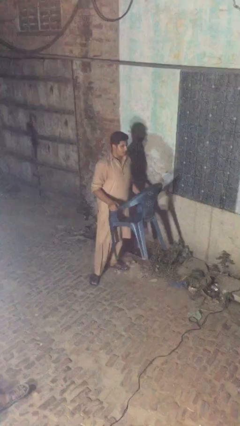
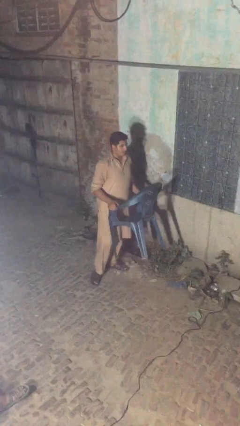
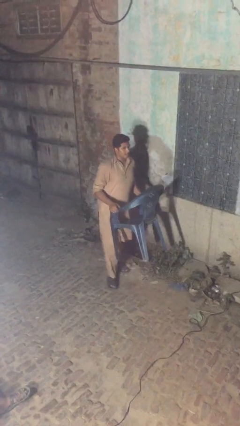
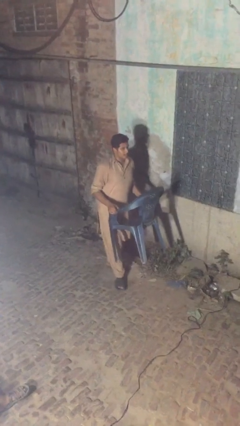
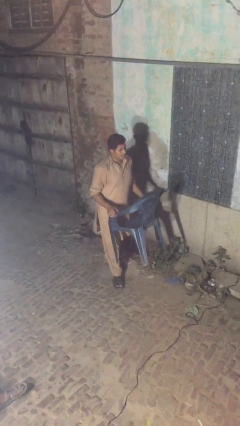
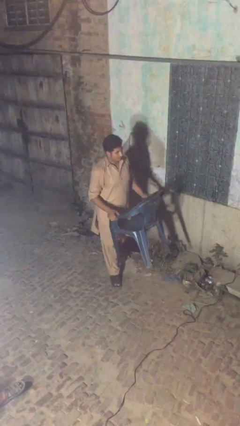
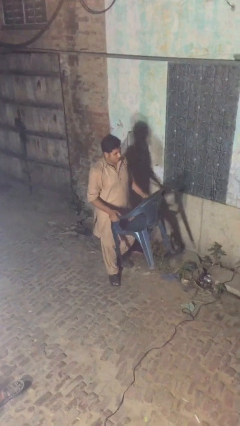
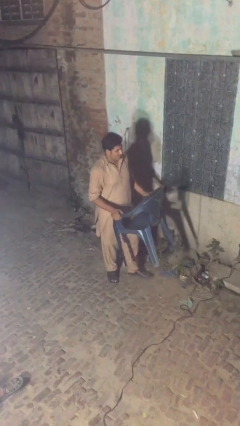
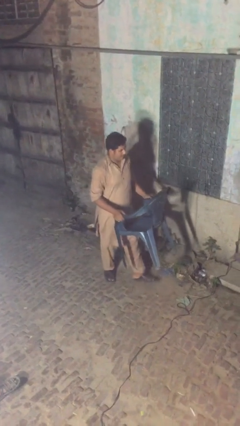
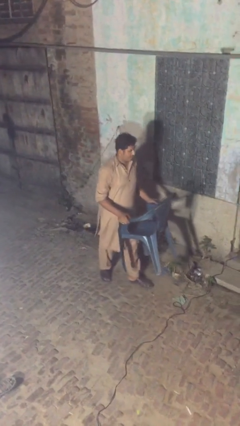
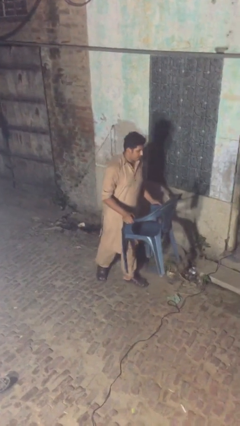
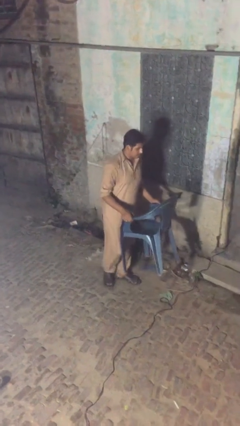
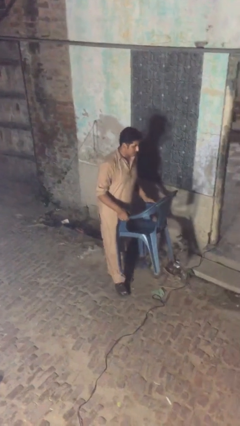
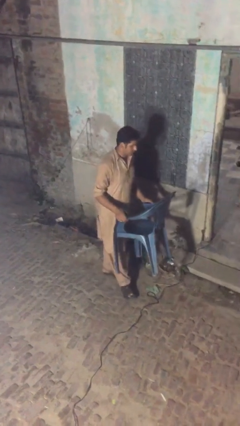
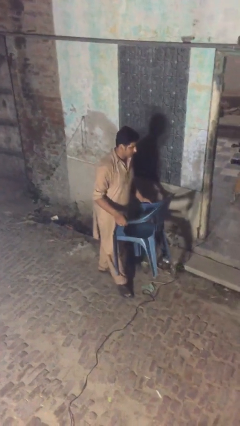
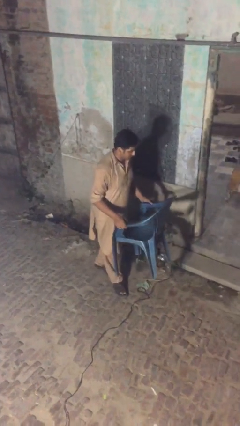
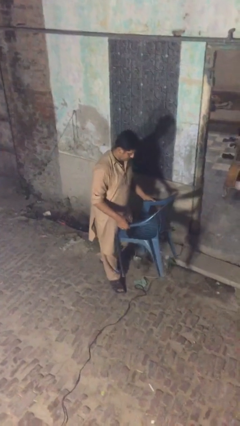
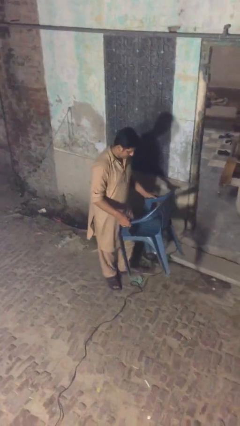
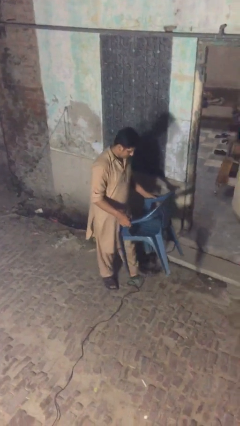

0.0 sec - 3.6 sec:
person carries heavy object

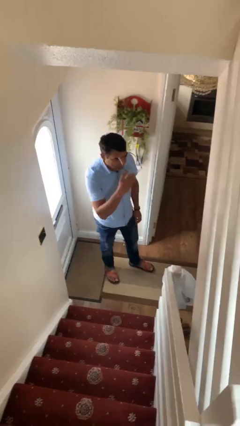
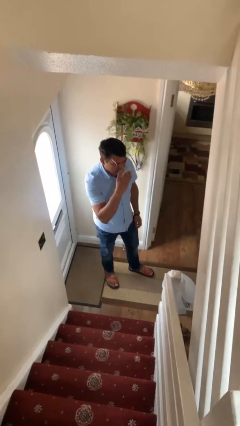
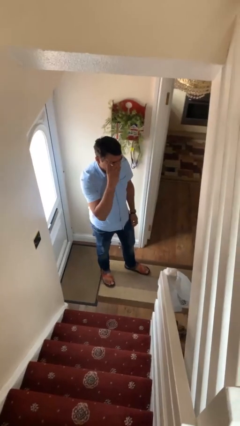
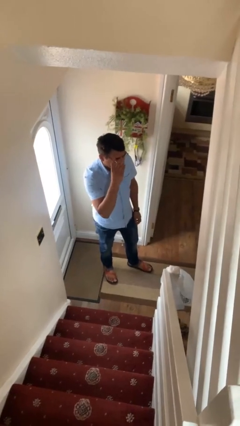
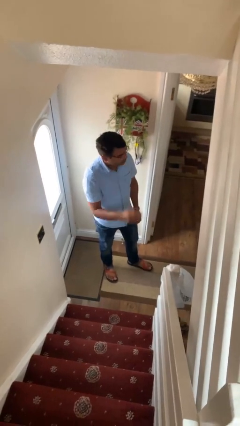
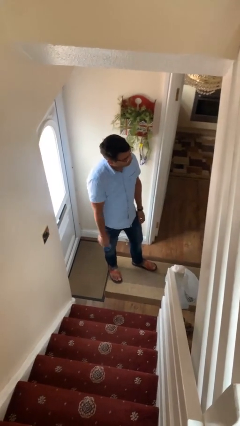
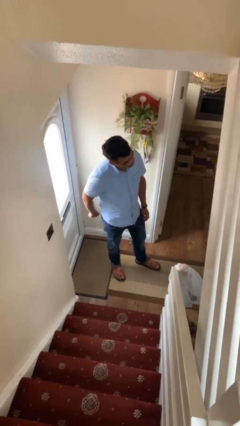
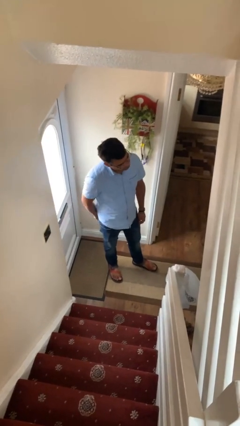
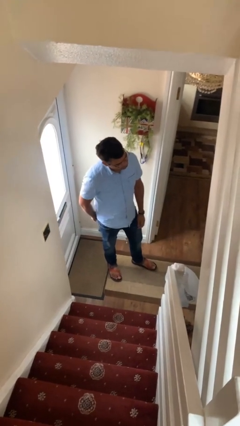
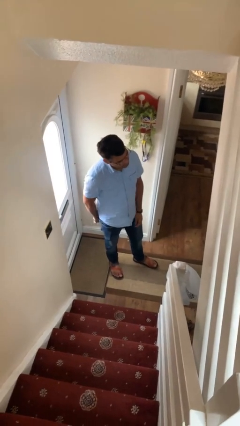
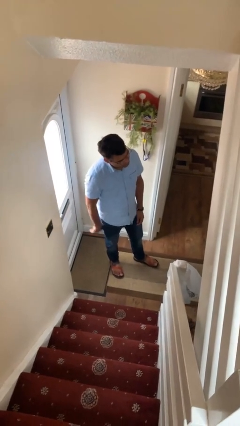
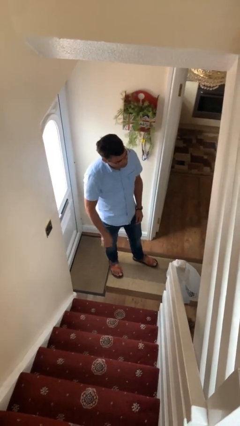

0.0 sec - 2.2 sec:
person puts on glasses

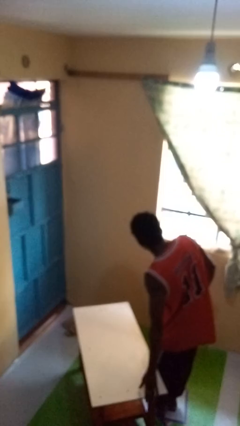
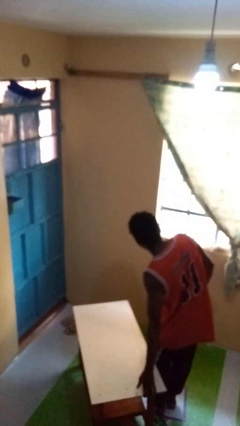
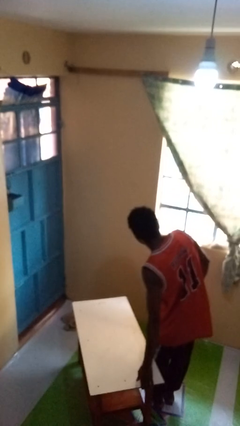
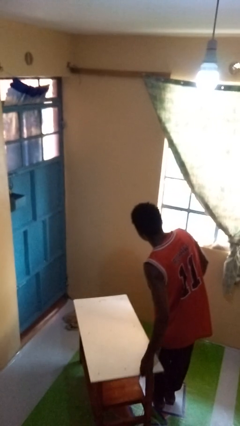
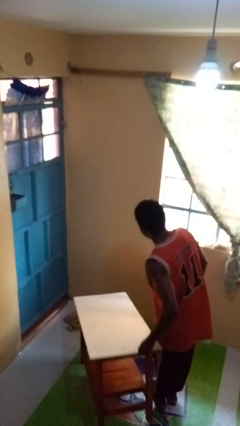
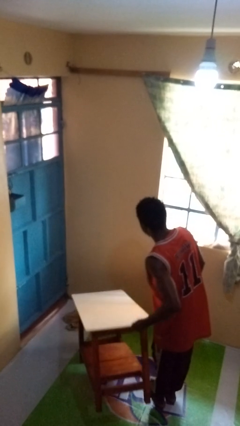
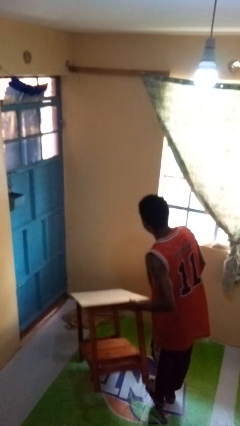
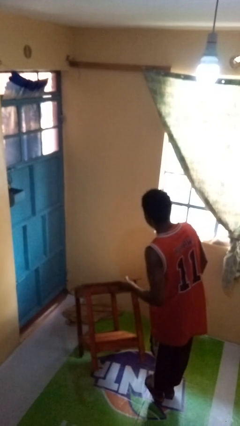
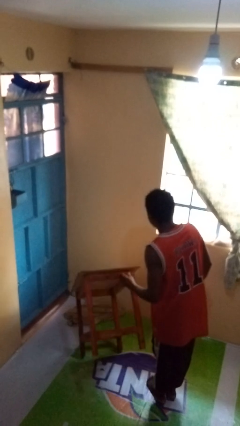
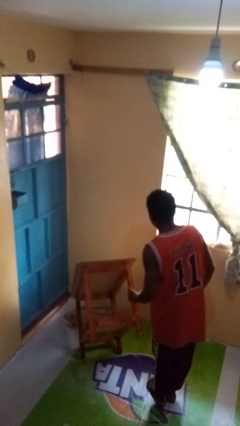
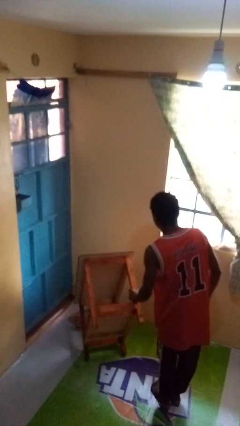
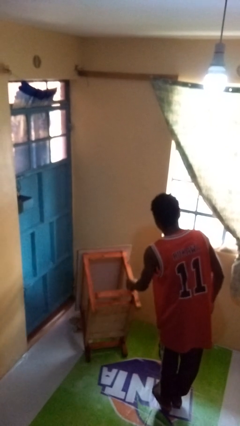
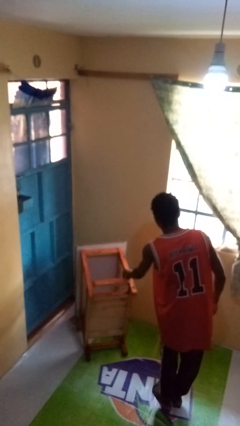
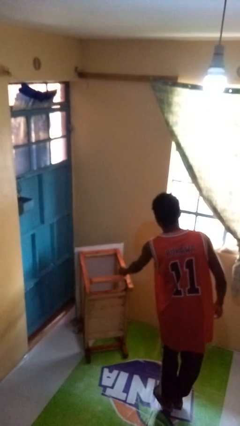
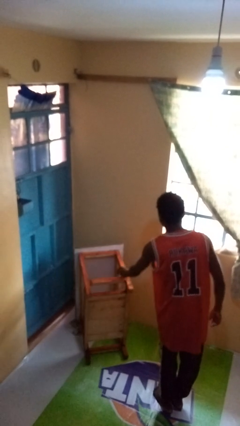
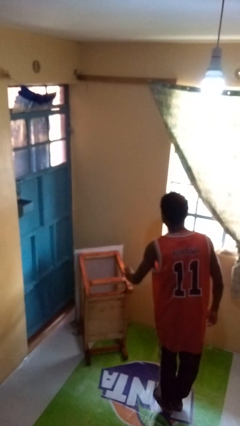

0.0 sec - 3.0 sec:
person knocks over furniture

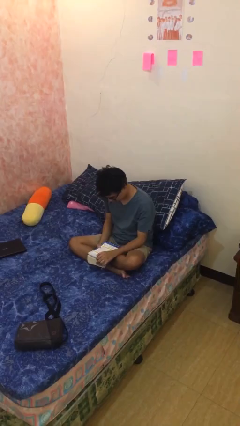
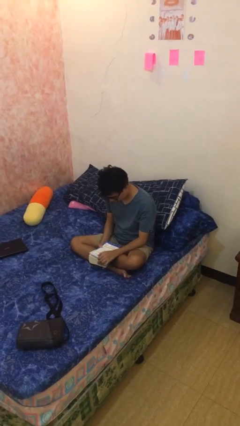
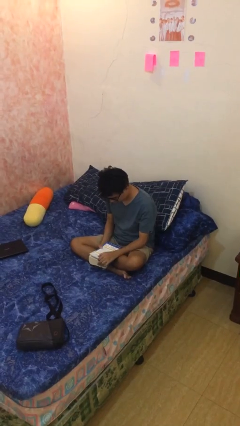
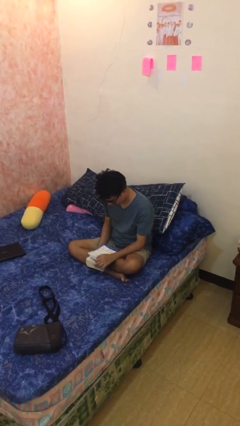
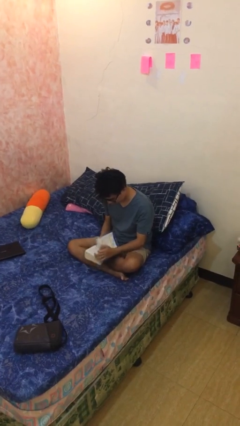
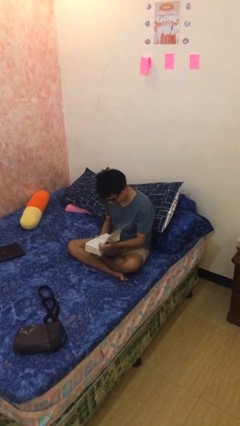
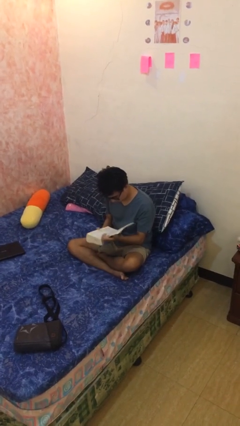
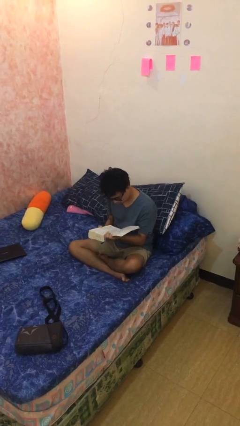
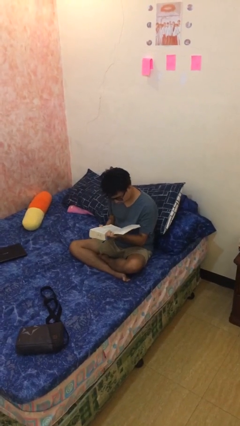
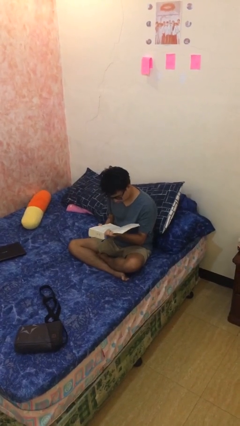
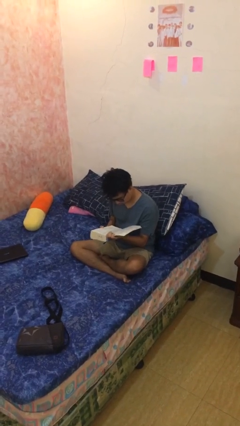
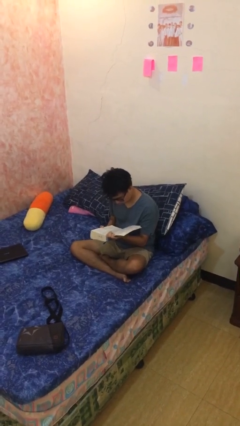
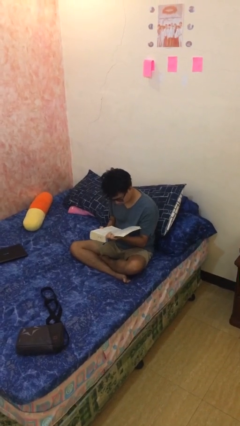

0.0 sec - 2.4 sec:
person reads document

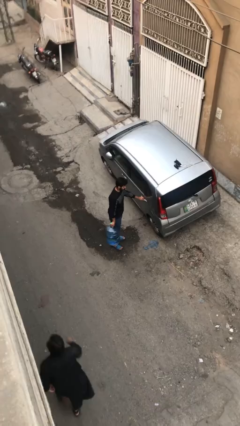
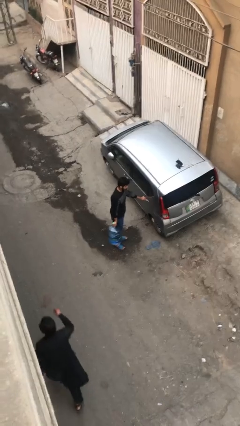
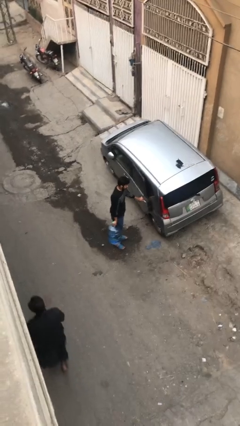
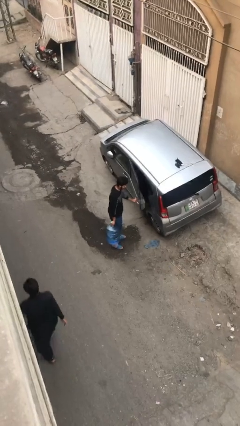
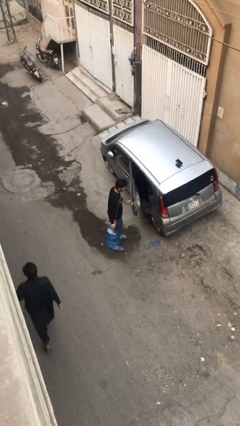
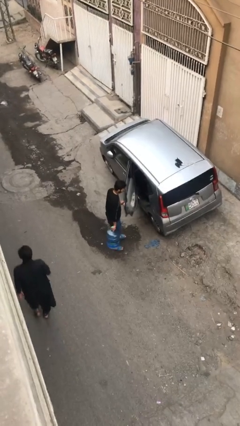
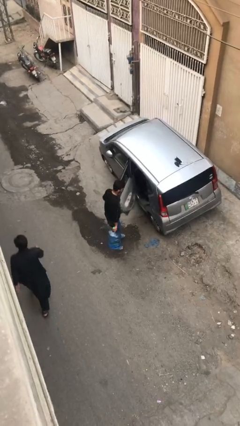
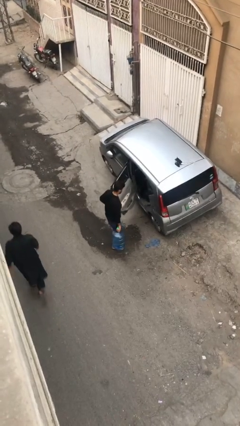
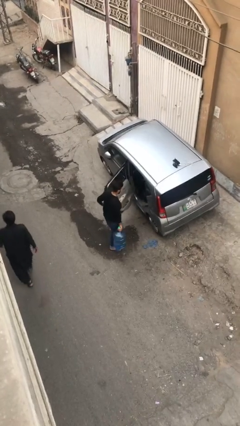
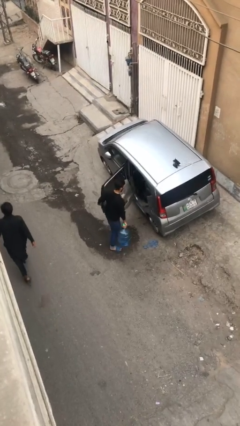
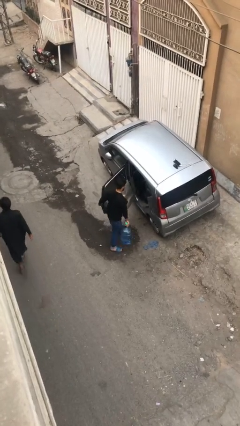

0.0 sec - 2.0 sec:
person opens car door

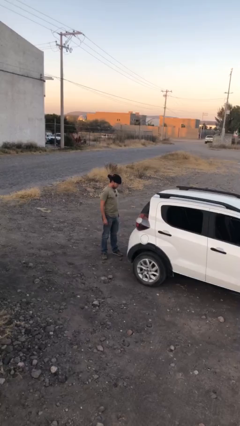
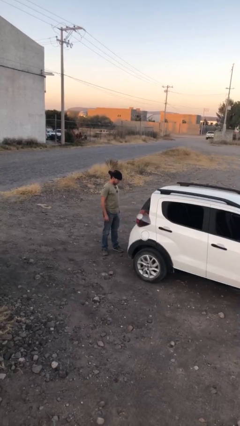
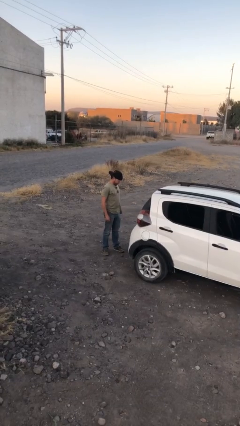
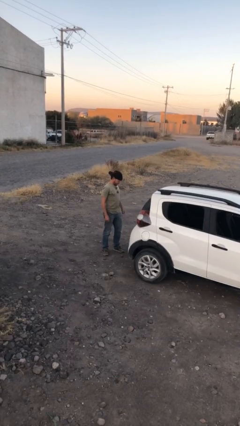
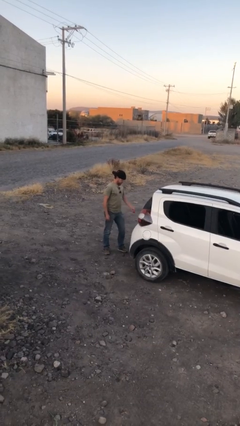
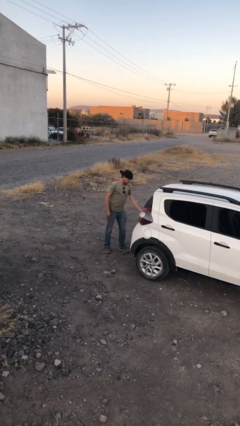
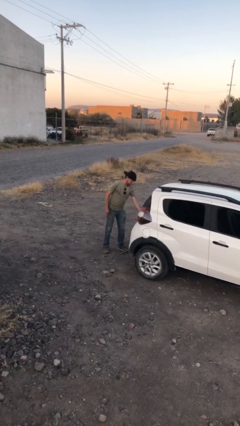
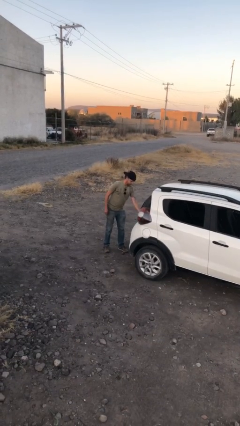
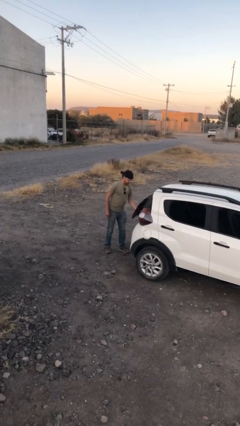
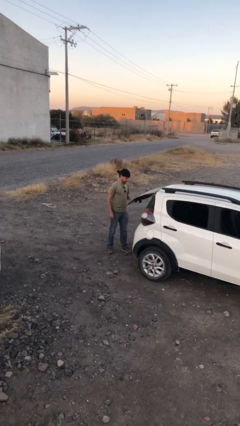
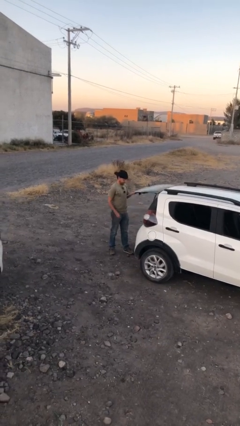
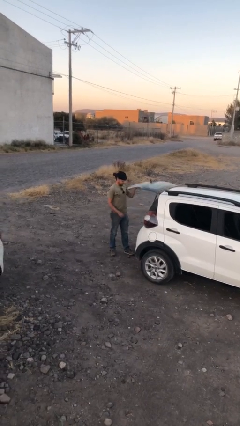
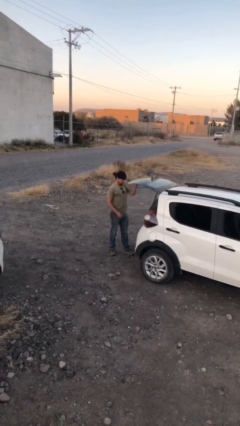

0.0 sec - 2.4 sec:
person opens car trunk

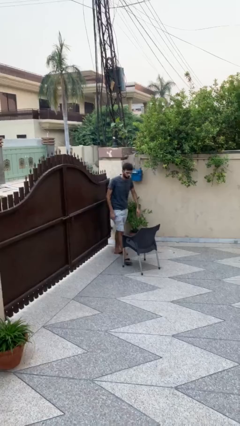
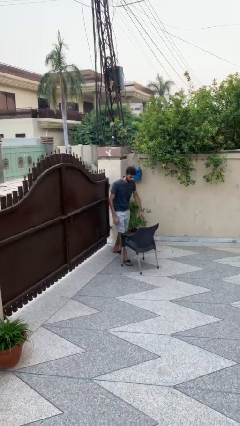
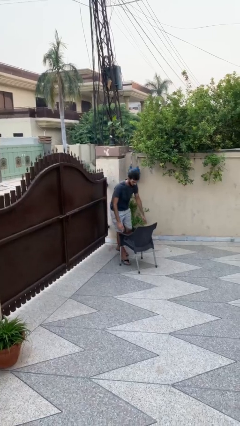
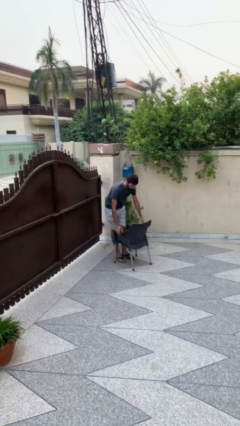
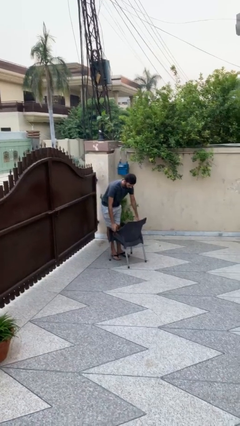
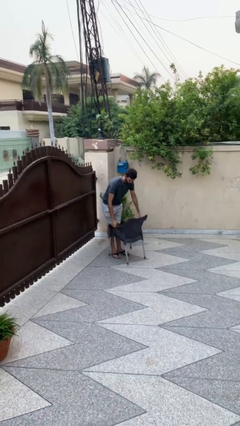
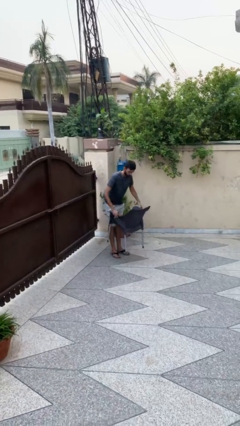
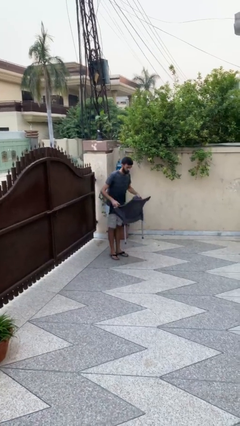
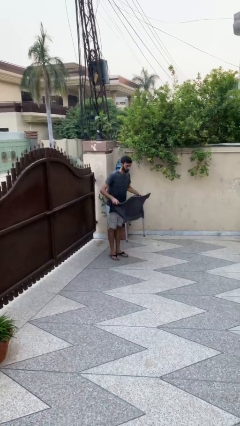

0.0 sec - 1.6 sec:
person picks up object from floor

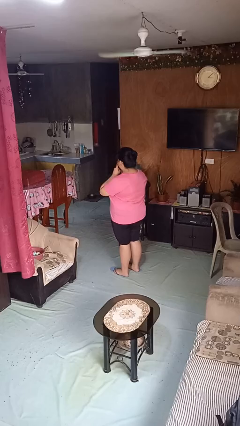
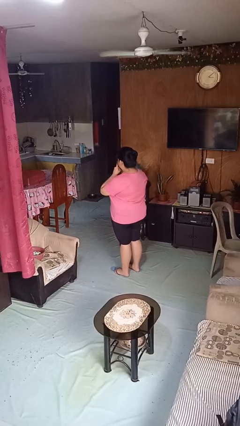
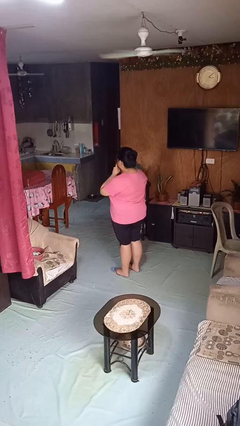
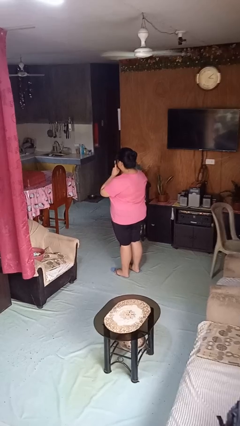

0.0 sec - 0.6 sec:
person gestures be quiet
